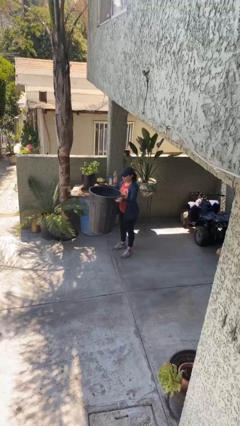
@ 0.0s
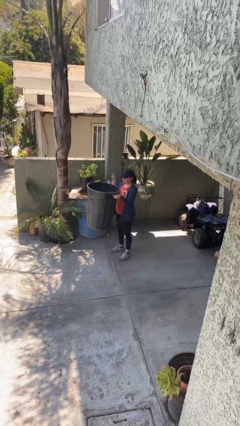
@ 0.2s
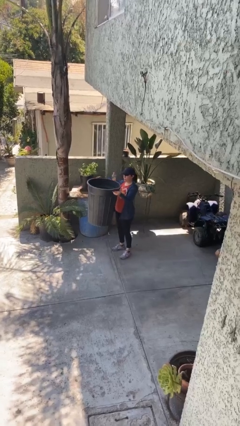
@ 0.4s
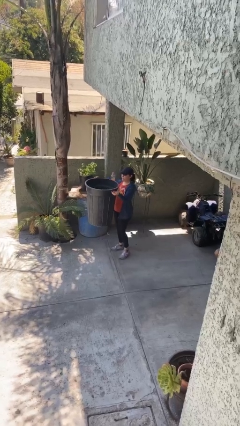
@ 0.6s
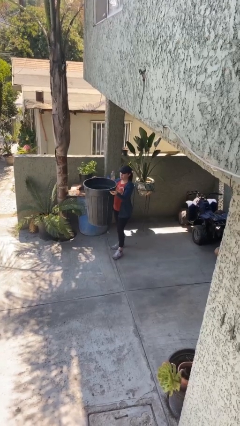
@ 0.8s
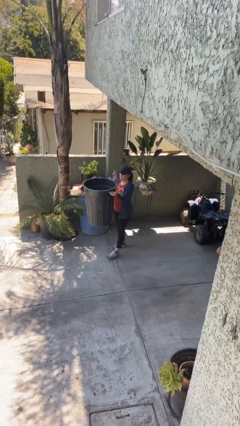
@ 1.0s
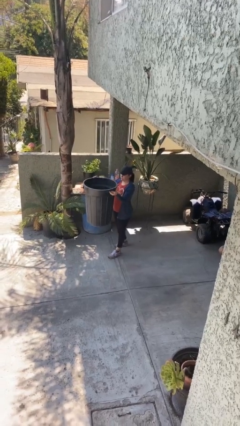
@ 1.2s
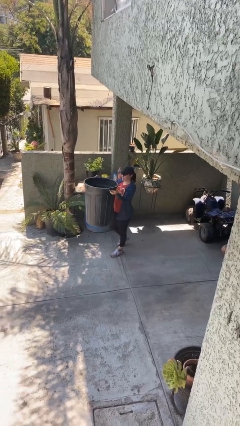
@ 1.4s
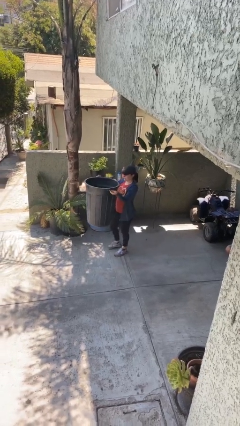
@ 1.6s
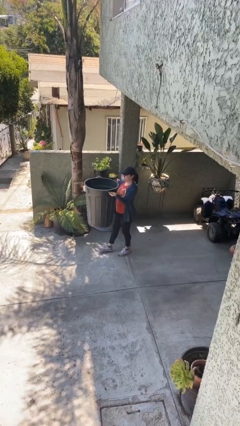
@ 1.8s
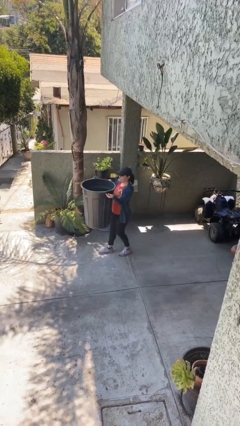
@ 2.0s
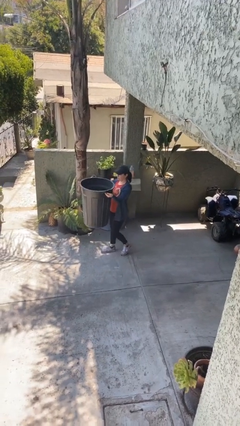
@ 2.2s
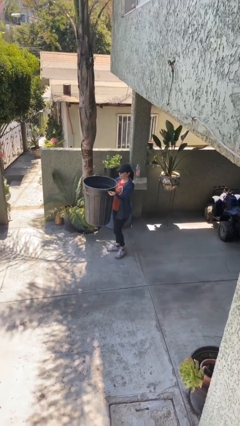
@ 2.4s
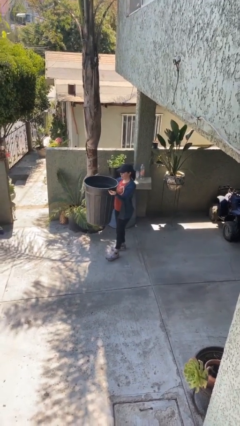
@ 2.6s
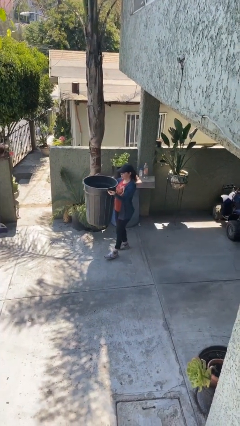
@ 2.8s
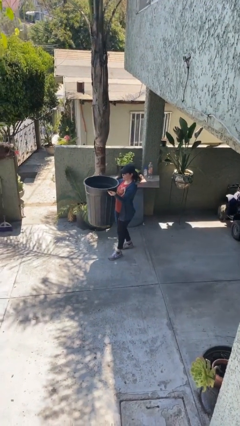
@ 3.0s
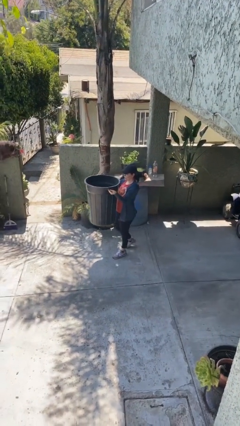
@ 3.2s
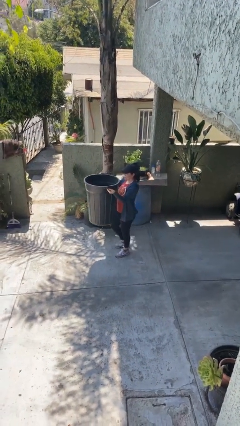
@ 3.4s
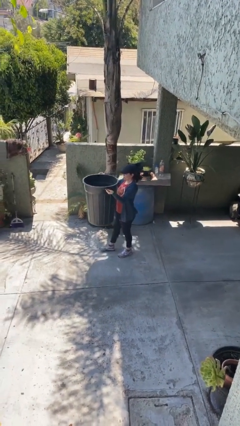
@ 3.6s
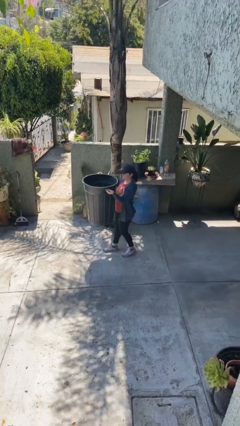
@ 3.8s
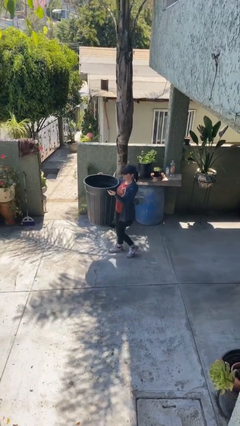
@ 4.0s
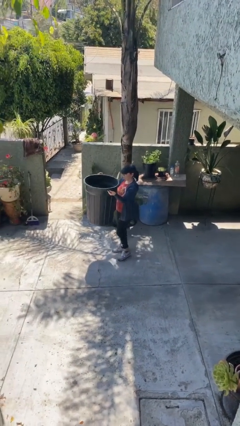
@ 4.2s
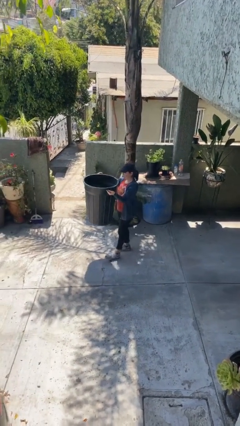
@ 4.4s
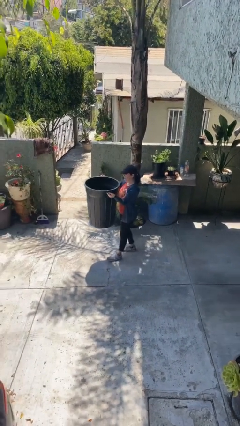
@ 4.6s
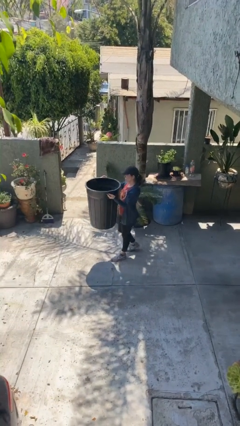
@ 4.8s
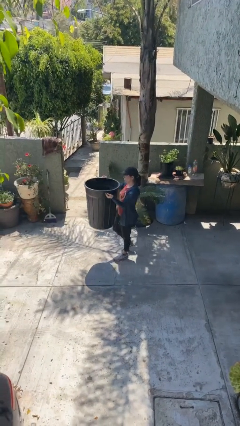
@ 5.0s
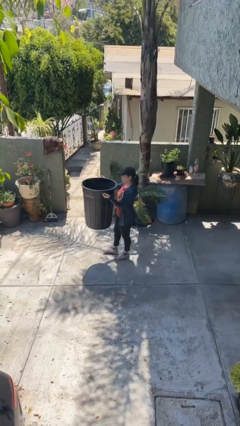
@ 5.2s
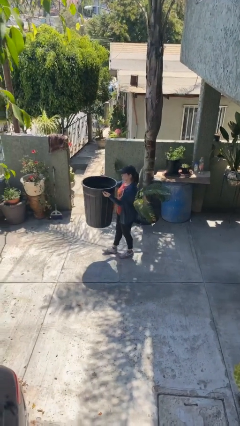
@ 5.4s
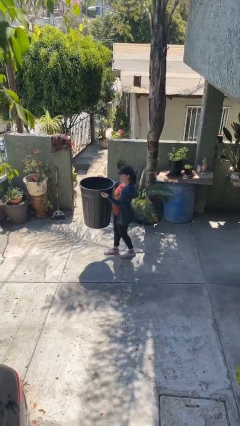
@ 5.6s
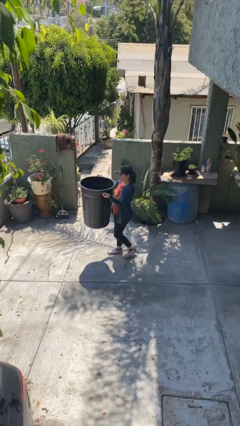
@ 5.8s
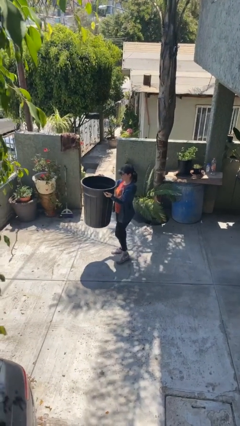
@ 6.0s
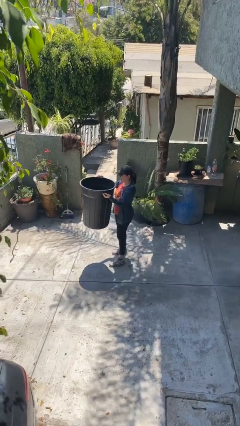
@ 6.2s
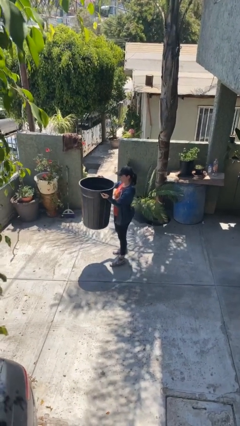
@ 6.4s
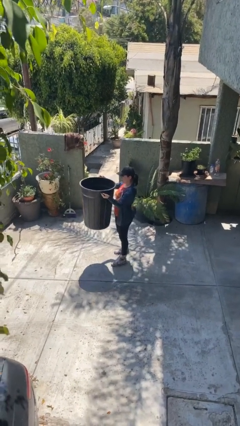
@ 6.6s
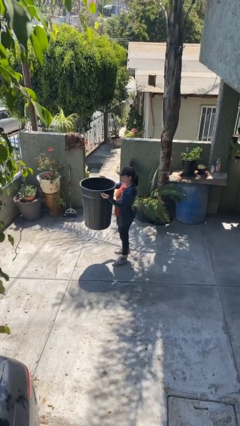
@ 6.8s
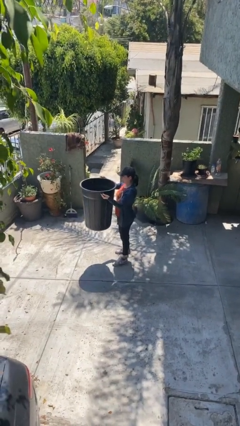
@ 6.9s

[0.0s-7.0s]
person carries heavy object

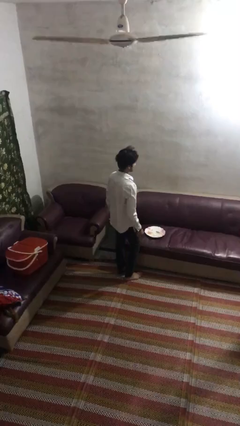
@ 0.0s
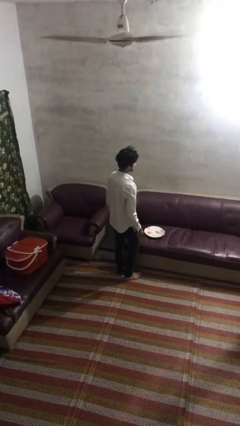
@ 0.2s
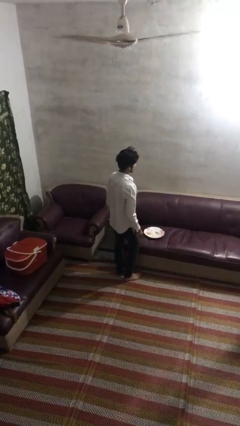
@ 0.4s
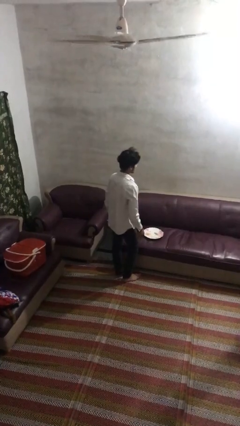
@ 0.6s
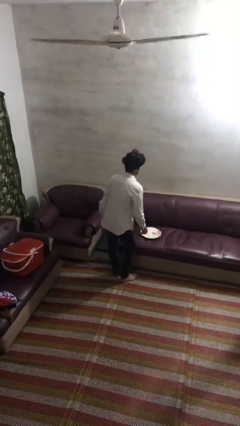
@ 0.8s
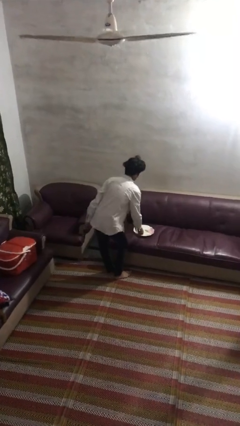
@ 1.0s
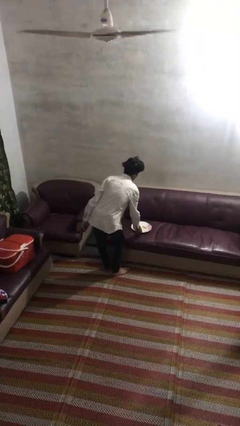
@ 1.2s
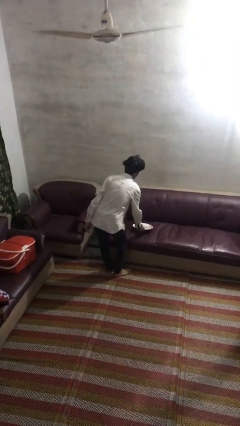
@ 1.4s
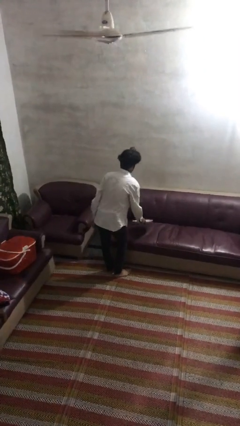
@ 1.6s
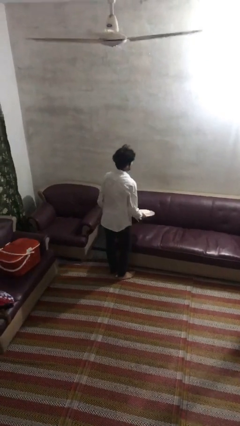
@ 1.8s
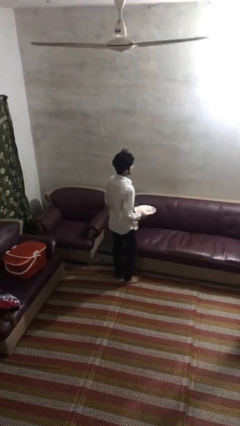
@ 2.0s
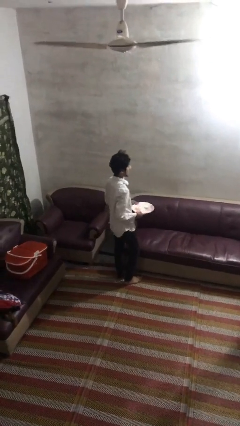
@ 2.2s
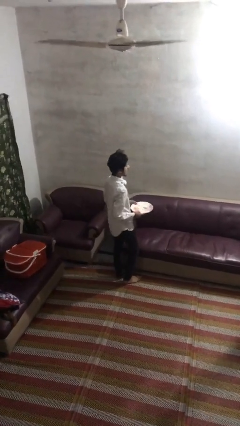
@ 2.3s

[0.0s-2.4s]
person picks up object from couch

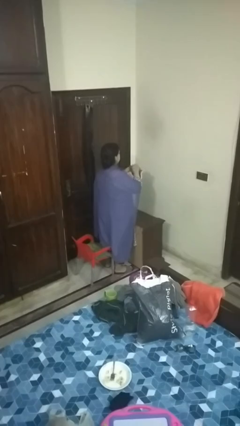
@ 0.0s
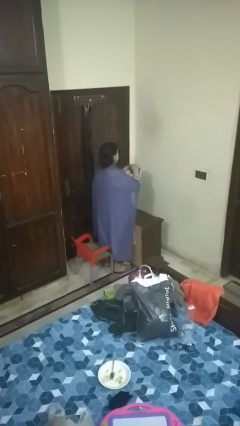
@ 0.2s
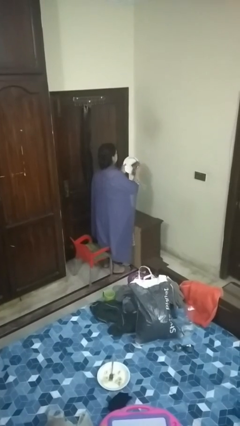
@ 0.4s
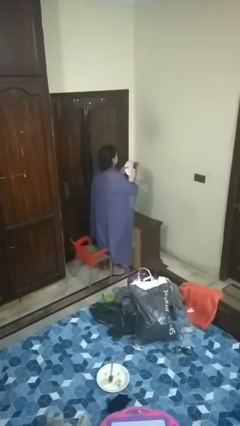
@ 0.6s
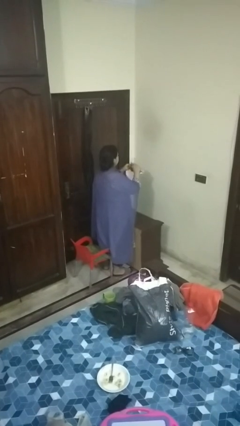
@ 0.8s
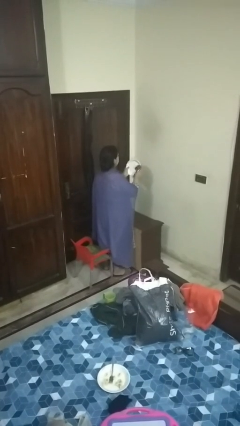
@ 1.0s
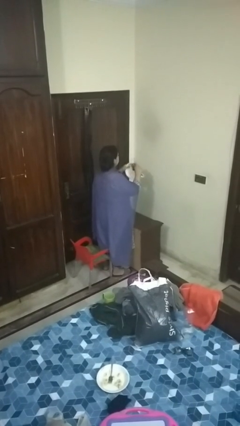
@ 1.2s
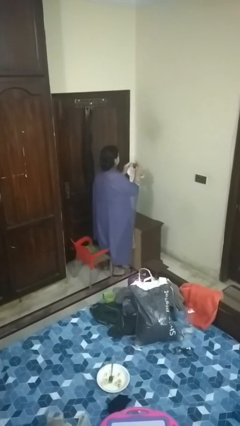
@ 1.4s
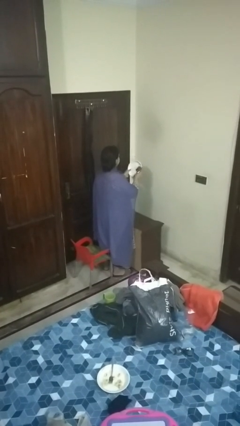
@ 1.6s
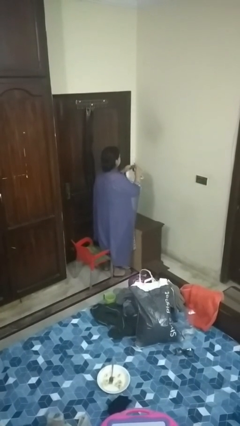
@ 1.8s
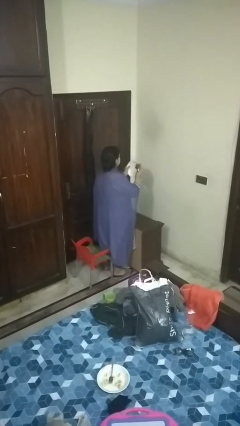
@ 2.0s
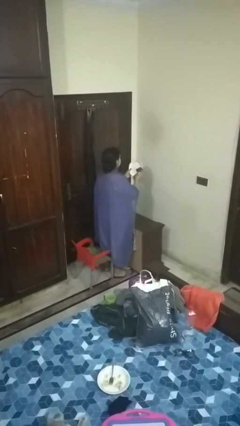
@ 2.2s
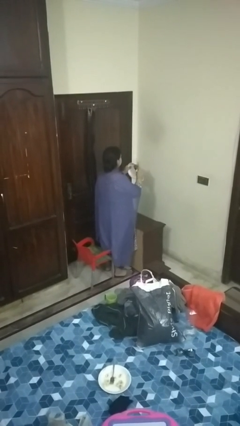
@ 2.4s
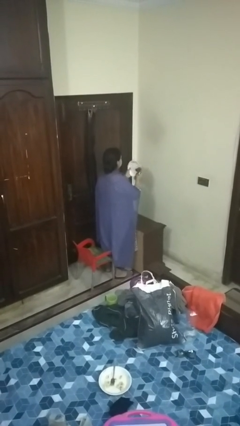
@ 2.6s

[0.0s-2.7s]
person dries dish

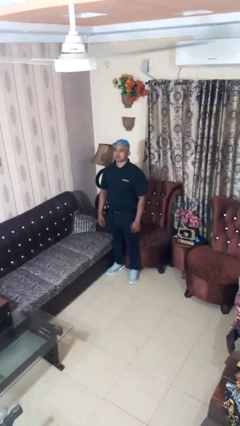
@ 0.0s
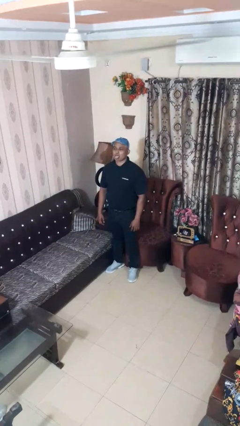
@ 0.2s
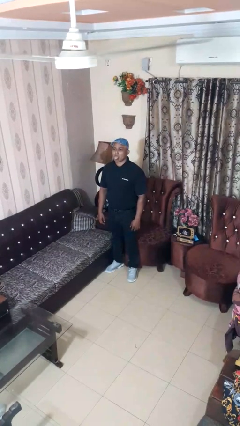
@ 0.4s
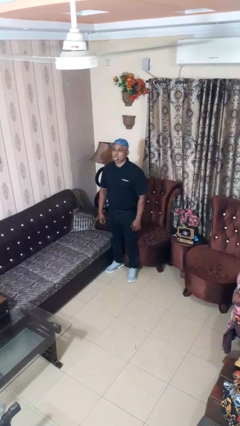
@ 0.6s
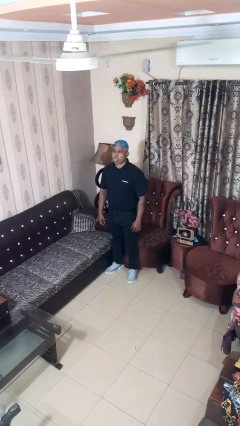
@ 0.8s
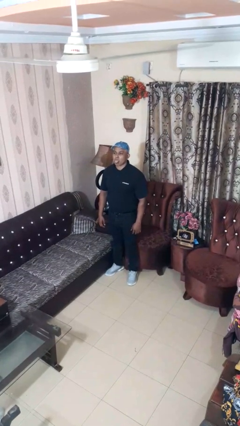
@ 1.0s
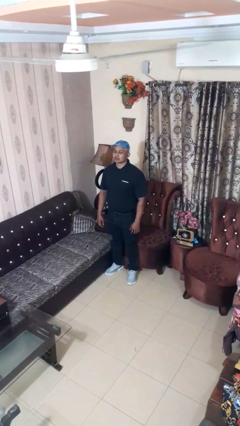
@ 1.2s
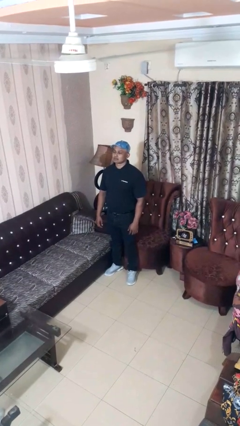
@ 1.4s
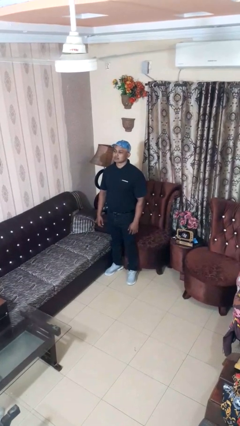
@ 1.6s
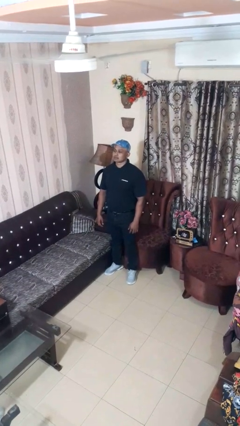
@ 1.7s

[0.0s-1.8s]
person sticks out tongue

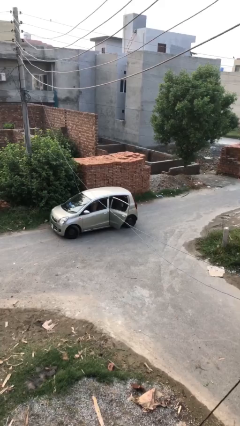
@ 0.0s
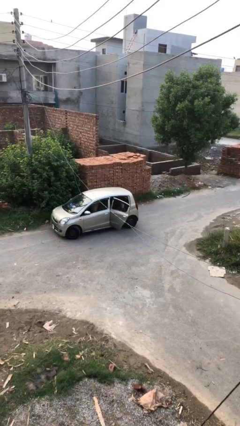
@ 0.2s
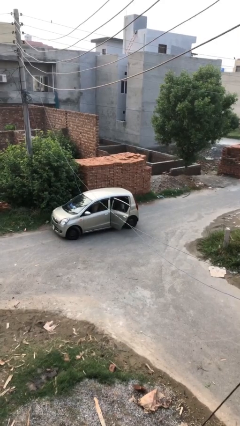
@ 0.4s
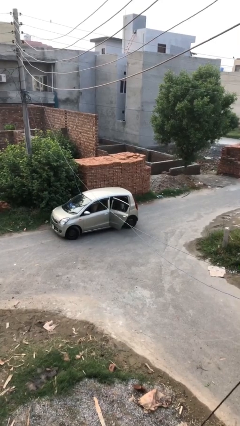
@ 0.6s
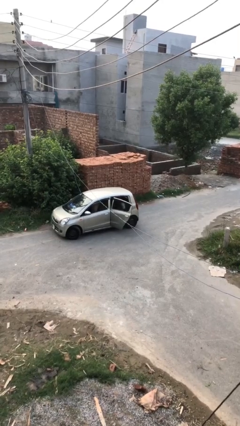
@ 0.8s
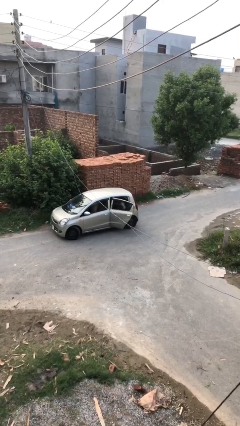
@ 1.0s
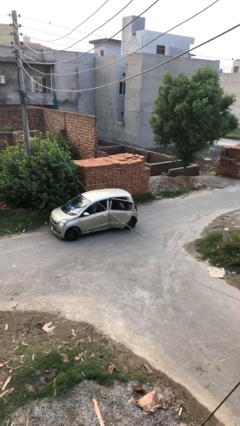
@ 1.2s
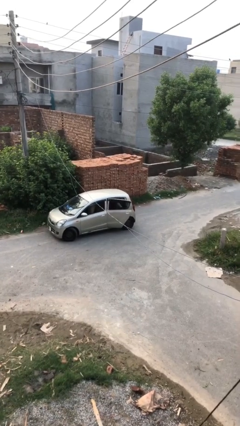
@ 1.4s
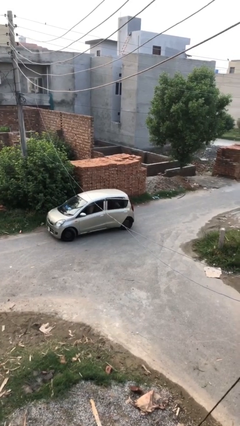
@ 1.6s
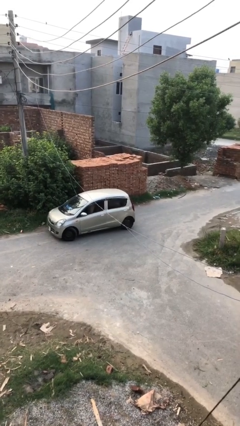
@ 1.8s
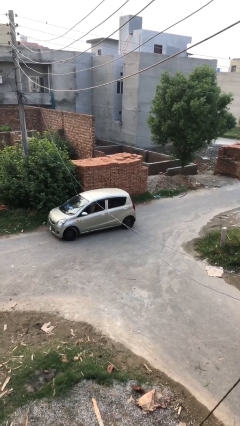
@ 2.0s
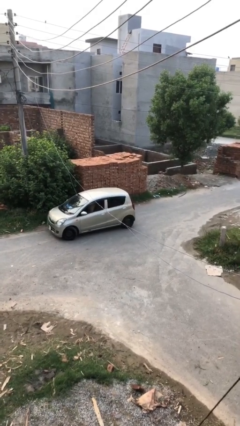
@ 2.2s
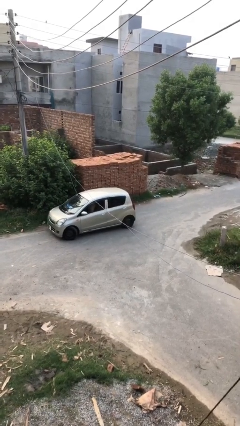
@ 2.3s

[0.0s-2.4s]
person closes car door

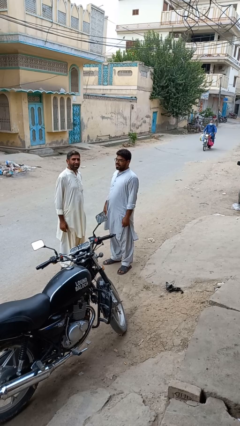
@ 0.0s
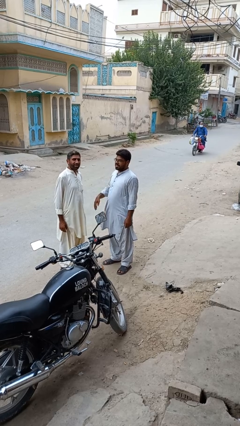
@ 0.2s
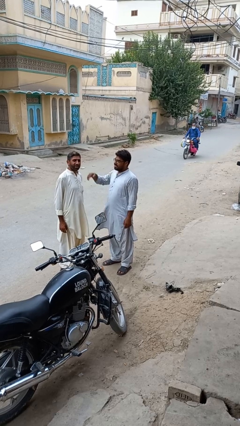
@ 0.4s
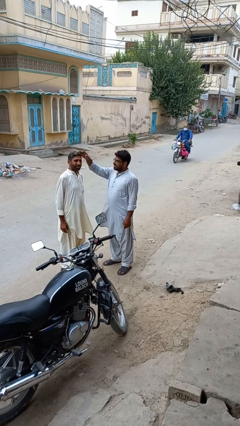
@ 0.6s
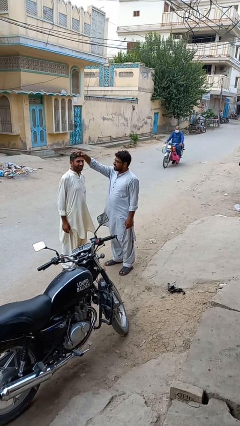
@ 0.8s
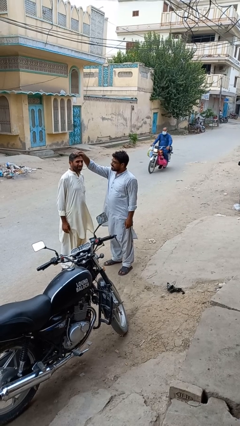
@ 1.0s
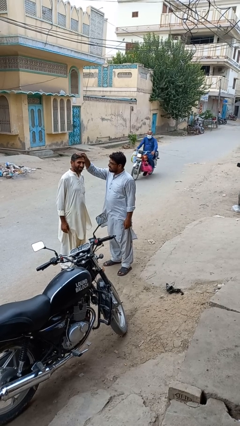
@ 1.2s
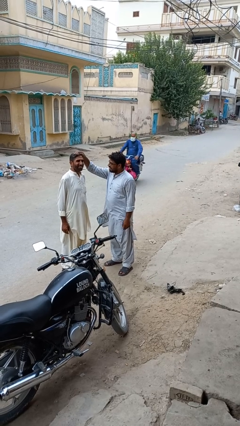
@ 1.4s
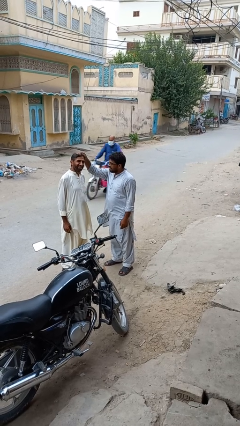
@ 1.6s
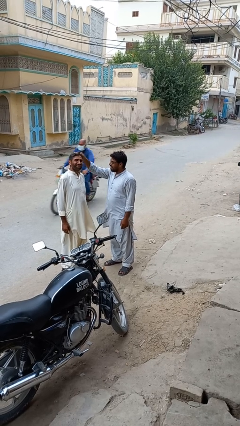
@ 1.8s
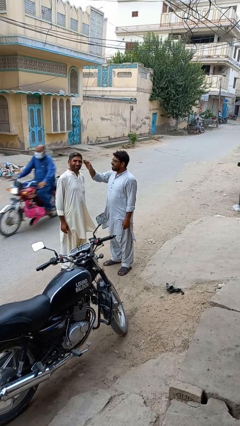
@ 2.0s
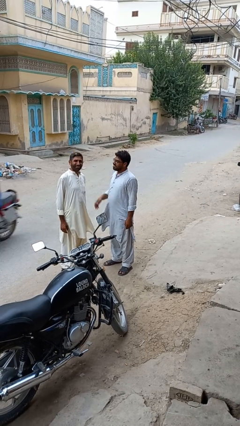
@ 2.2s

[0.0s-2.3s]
person grabs person by hair
